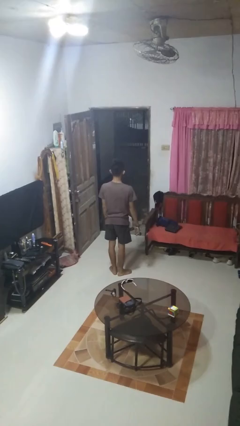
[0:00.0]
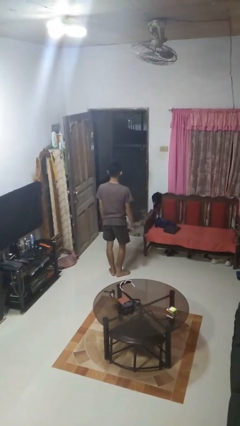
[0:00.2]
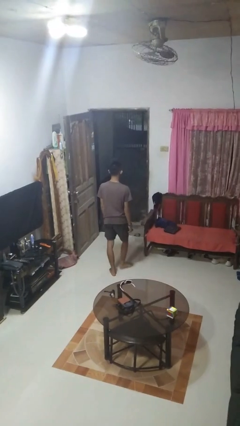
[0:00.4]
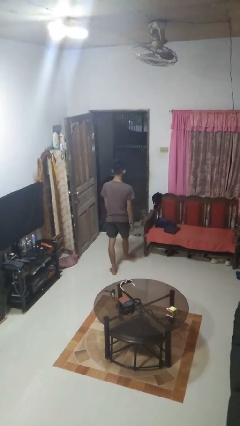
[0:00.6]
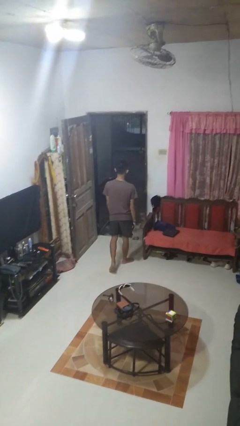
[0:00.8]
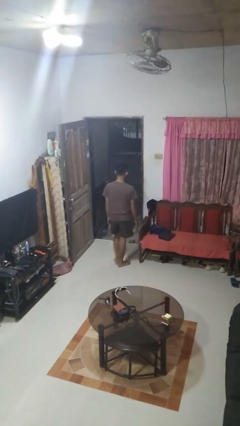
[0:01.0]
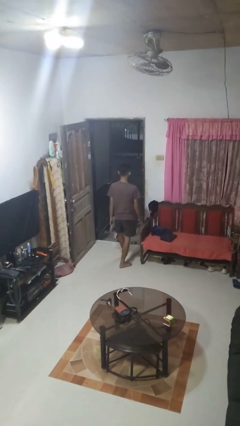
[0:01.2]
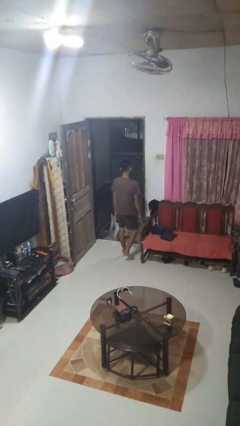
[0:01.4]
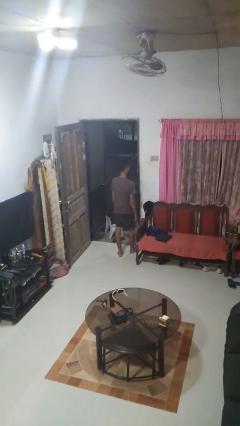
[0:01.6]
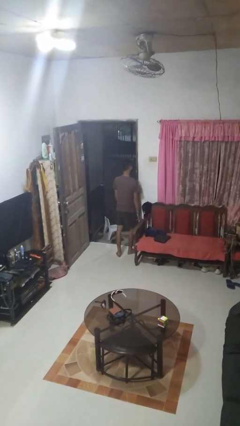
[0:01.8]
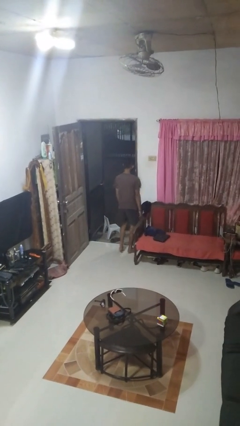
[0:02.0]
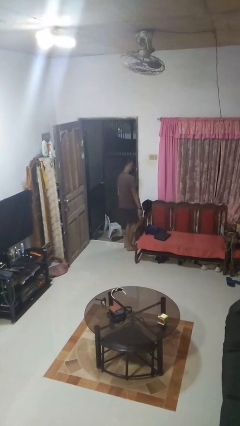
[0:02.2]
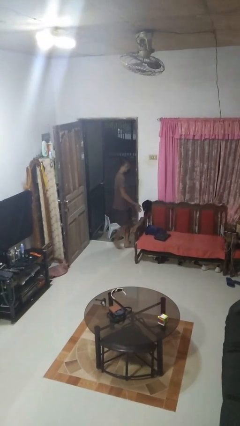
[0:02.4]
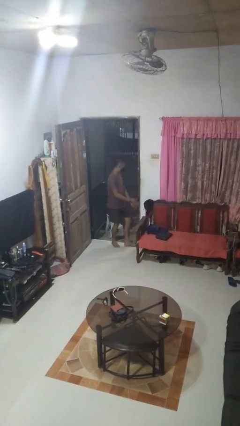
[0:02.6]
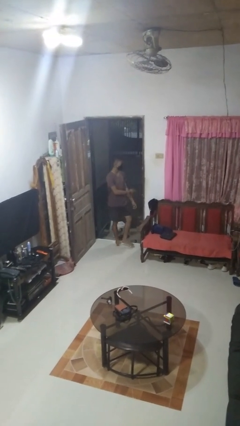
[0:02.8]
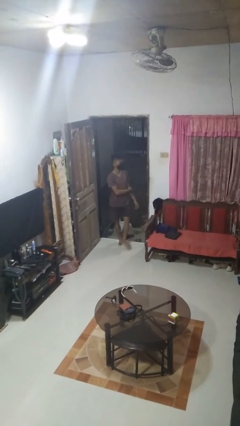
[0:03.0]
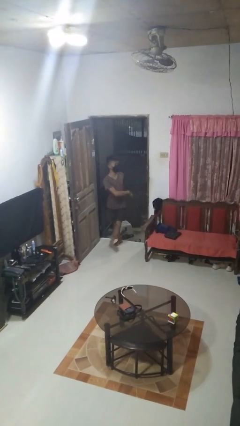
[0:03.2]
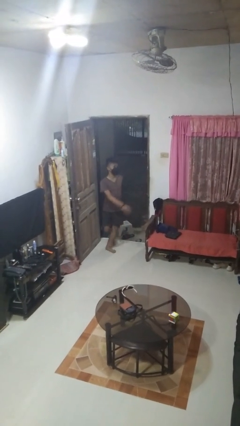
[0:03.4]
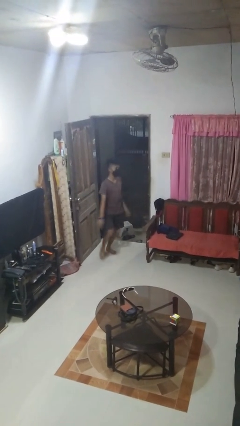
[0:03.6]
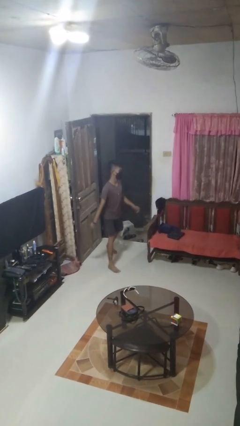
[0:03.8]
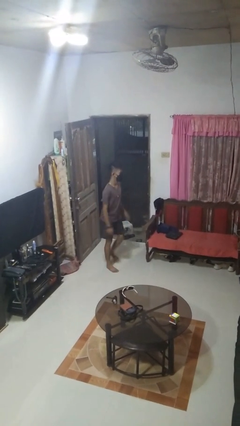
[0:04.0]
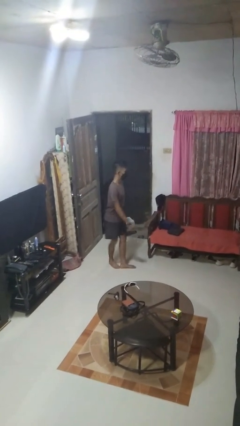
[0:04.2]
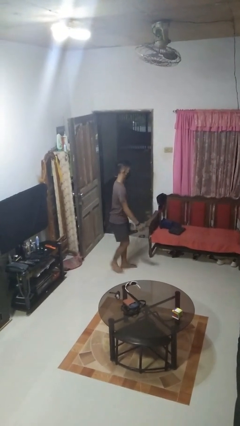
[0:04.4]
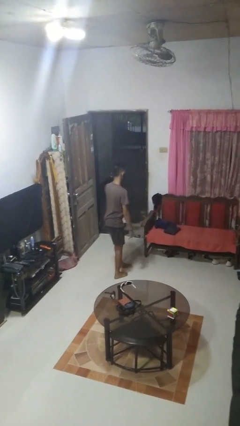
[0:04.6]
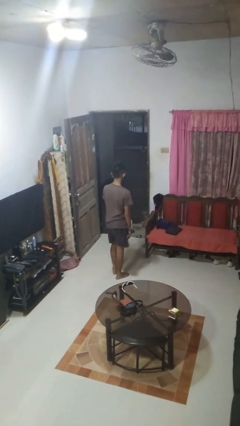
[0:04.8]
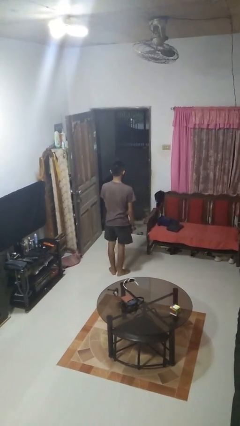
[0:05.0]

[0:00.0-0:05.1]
person bumps into wall

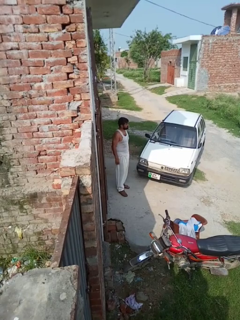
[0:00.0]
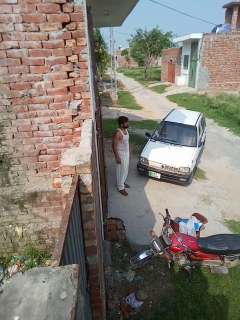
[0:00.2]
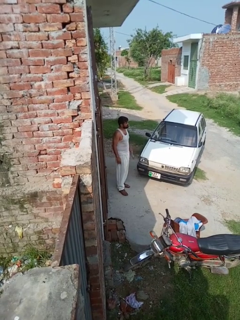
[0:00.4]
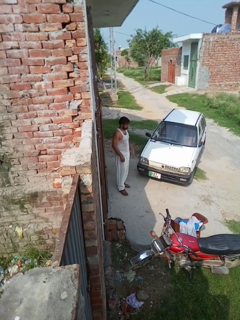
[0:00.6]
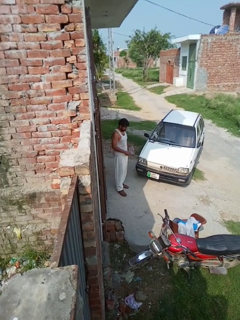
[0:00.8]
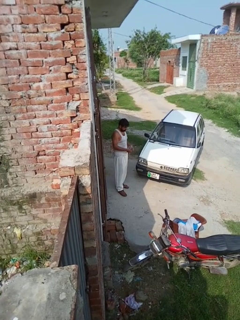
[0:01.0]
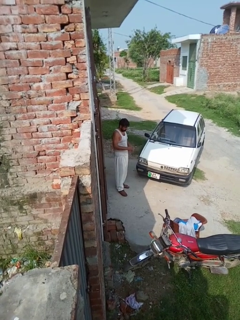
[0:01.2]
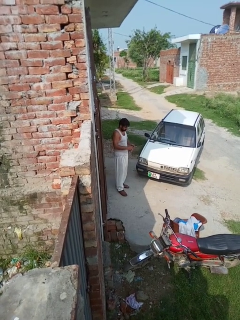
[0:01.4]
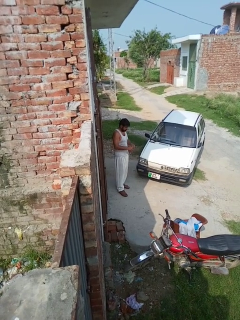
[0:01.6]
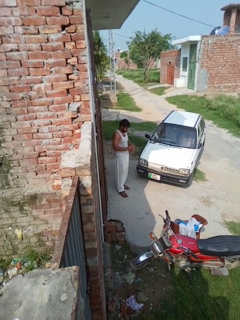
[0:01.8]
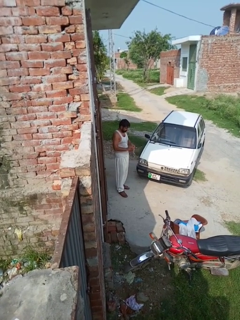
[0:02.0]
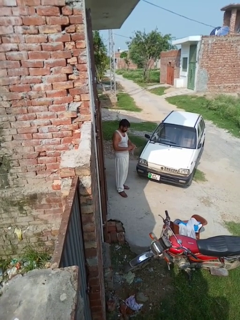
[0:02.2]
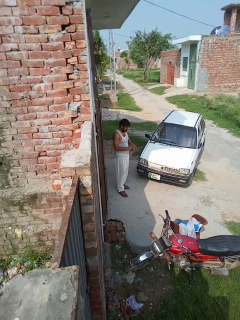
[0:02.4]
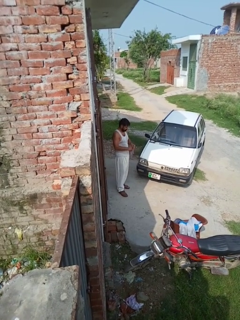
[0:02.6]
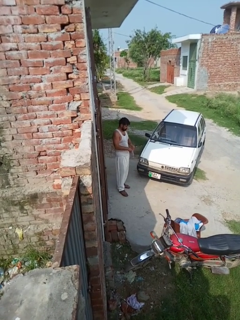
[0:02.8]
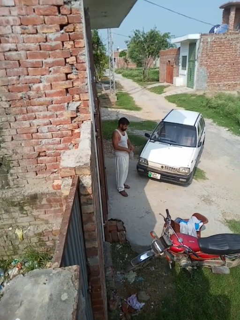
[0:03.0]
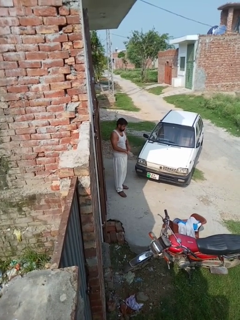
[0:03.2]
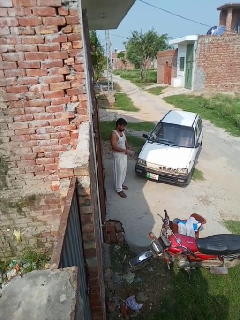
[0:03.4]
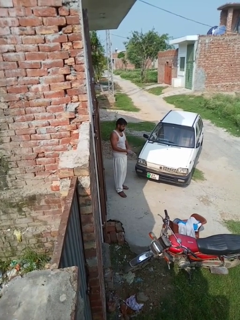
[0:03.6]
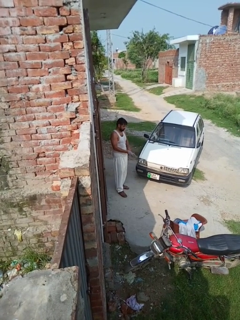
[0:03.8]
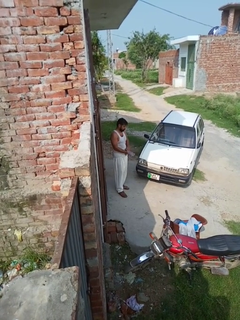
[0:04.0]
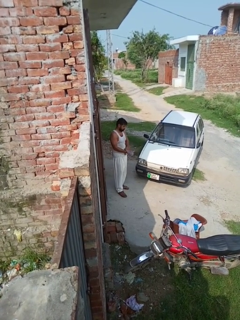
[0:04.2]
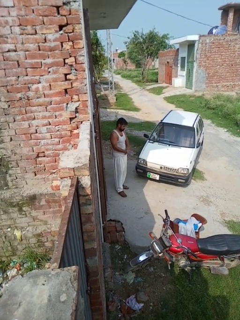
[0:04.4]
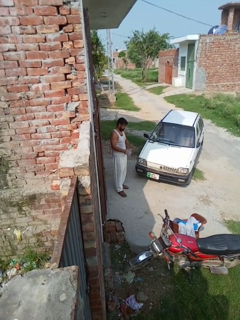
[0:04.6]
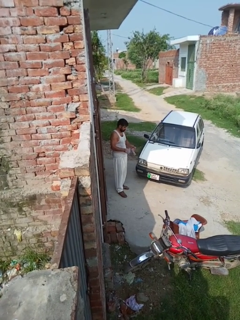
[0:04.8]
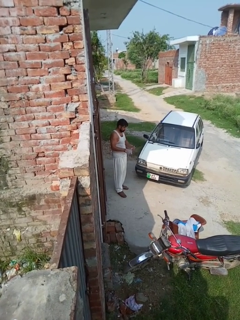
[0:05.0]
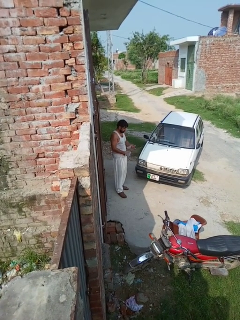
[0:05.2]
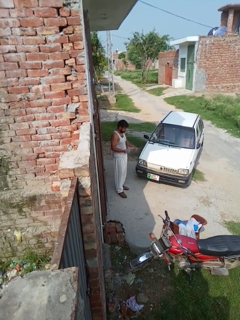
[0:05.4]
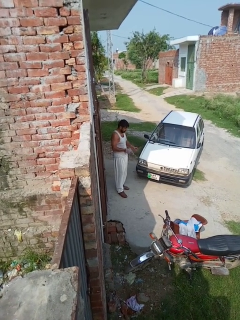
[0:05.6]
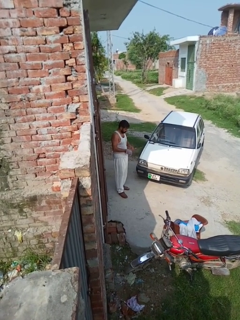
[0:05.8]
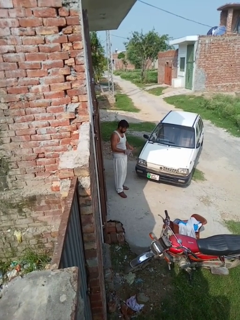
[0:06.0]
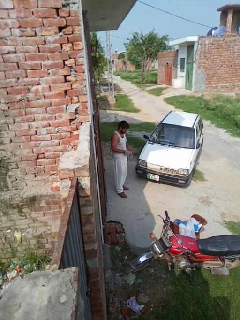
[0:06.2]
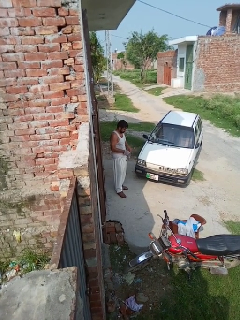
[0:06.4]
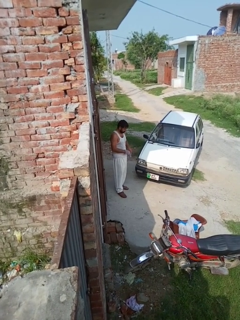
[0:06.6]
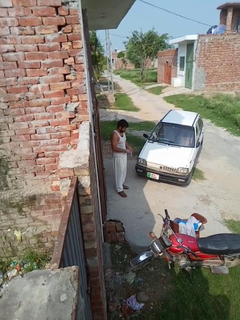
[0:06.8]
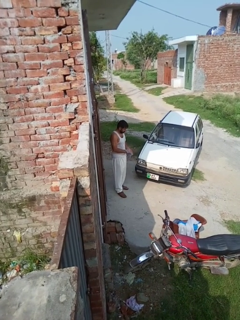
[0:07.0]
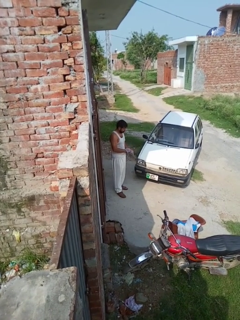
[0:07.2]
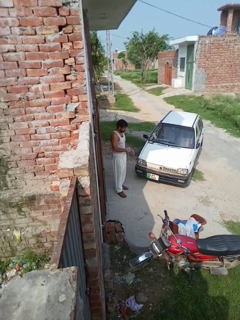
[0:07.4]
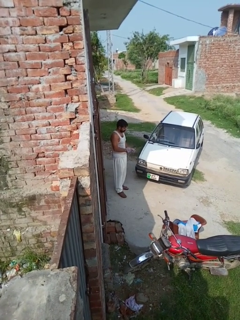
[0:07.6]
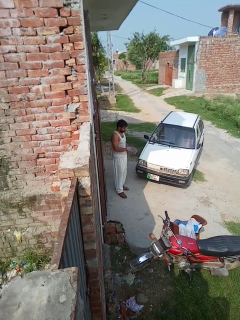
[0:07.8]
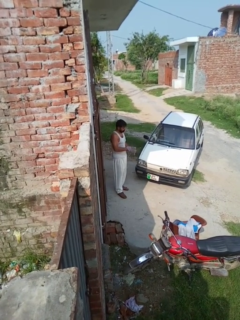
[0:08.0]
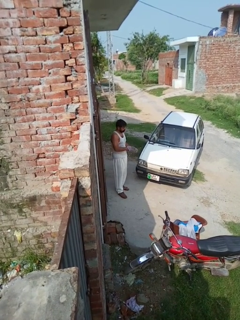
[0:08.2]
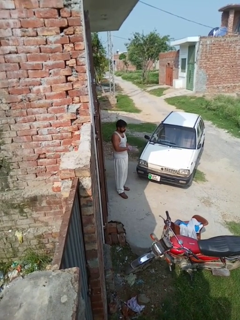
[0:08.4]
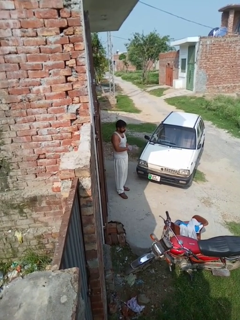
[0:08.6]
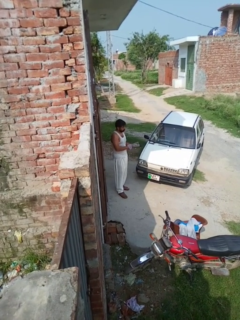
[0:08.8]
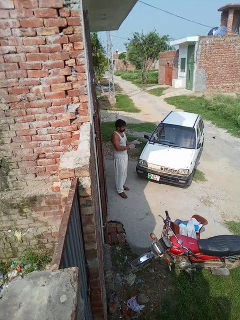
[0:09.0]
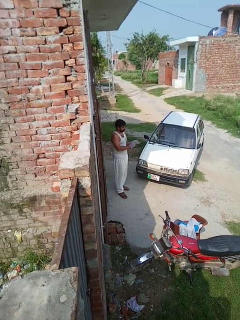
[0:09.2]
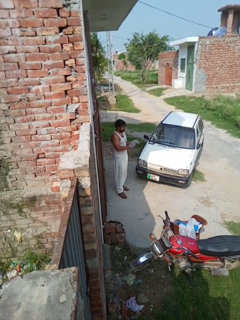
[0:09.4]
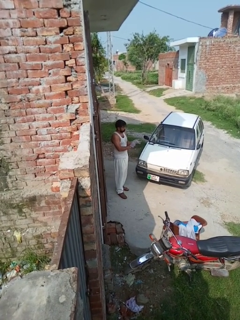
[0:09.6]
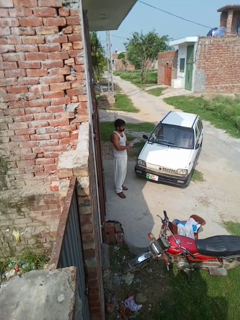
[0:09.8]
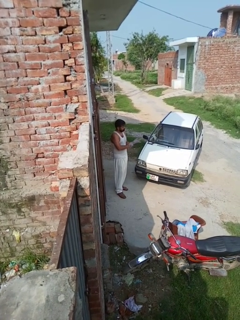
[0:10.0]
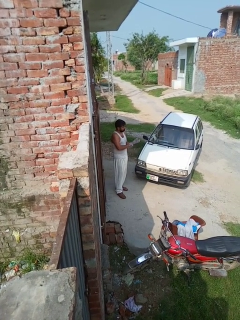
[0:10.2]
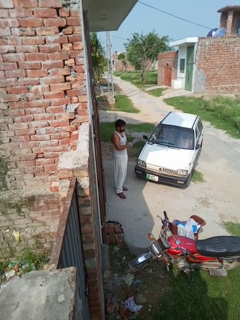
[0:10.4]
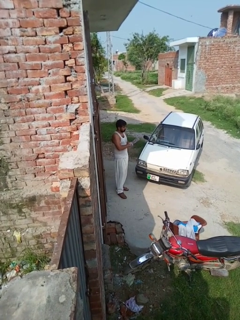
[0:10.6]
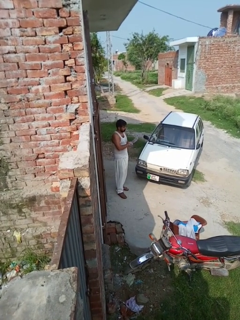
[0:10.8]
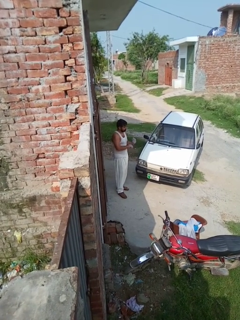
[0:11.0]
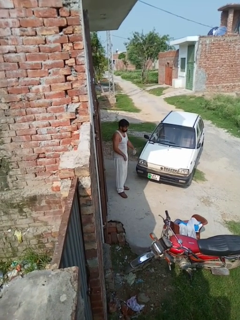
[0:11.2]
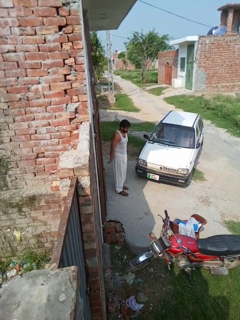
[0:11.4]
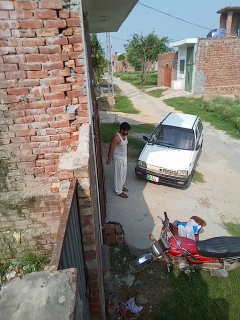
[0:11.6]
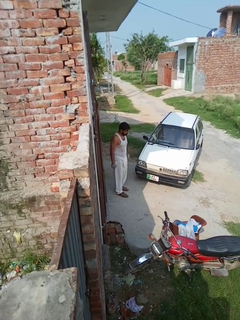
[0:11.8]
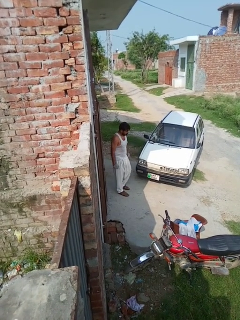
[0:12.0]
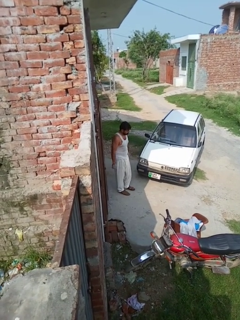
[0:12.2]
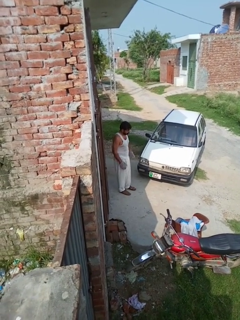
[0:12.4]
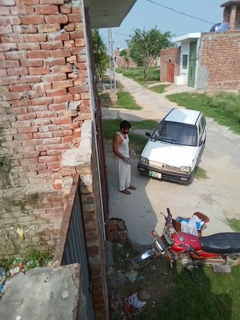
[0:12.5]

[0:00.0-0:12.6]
person puts on gloves

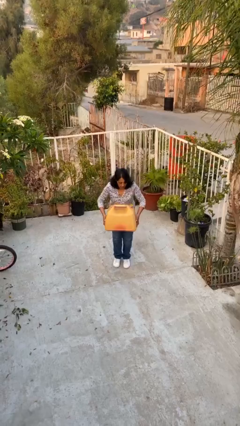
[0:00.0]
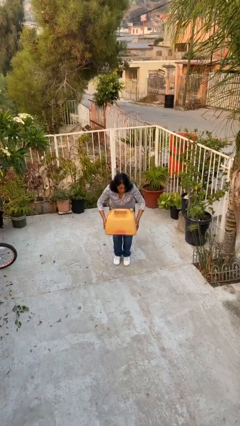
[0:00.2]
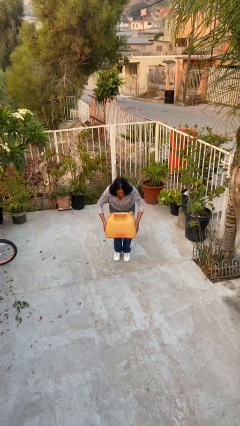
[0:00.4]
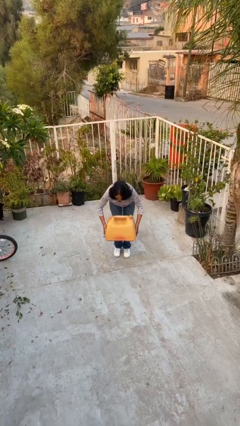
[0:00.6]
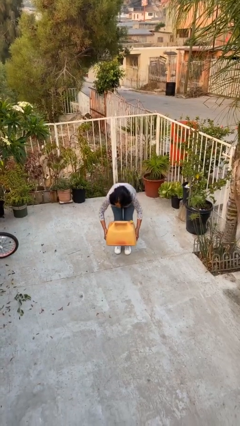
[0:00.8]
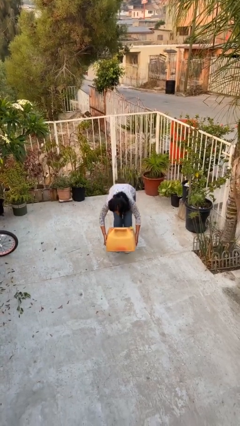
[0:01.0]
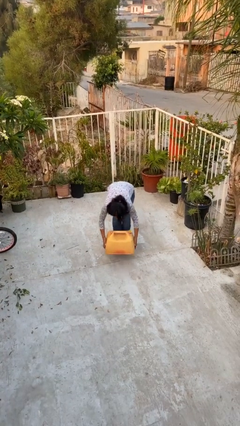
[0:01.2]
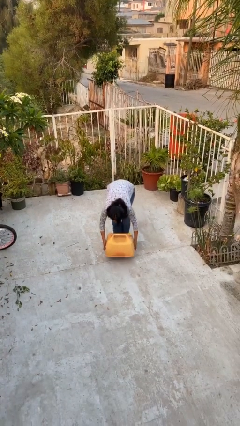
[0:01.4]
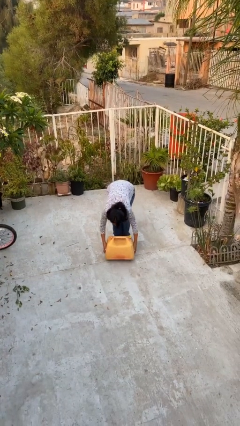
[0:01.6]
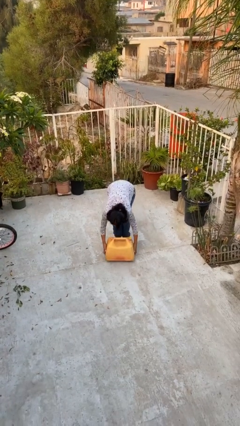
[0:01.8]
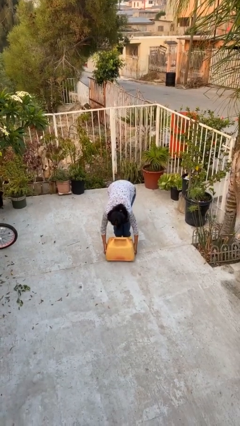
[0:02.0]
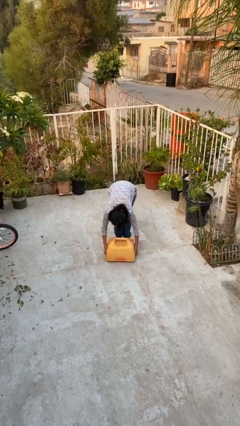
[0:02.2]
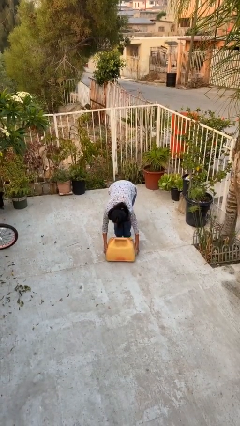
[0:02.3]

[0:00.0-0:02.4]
person puts down object on floor

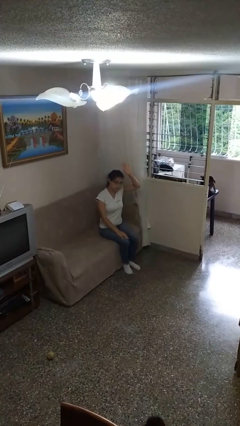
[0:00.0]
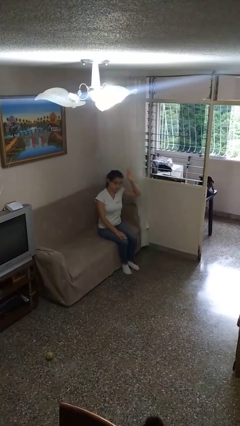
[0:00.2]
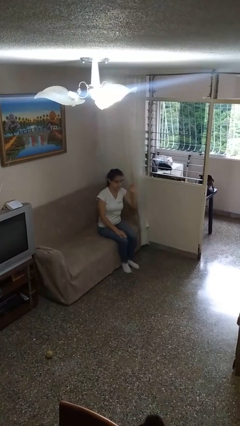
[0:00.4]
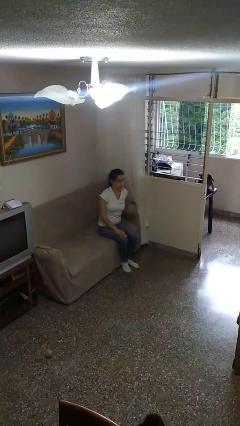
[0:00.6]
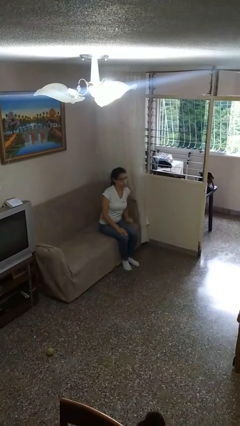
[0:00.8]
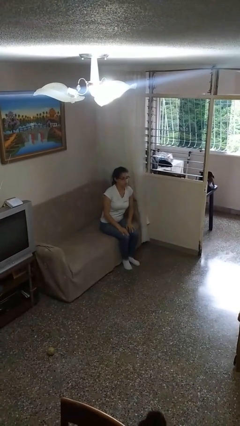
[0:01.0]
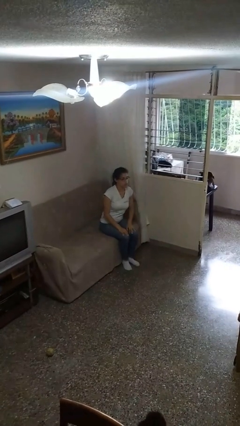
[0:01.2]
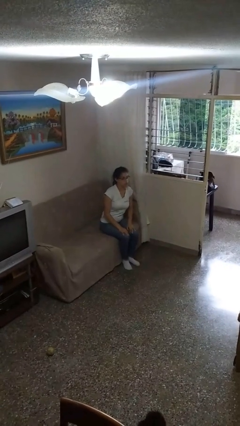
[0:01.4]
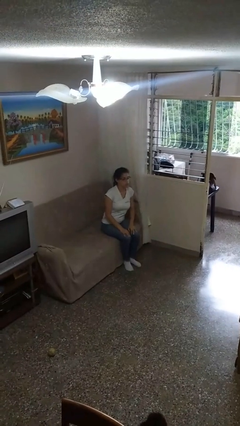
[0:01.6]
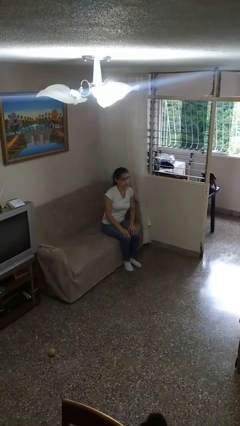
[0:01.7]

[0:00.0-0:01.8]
person gestures lower hand
